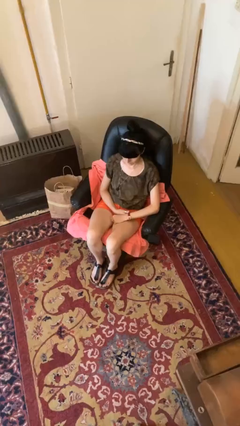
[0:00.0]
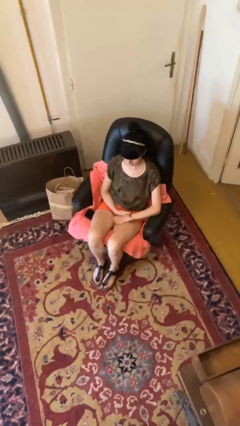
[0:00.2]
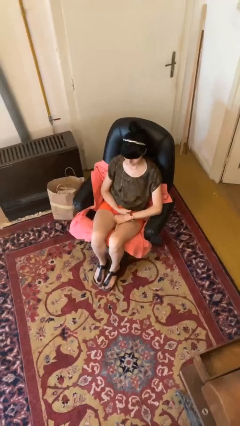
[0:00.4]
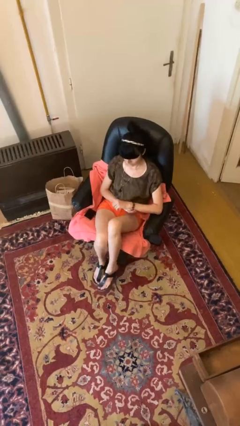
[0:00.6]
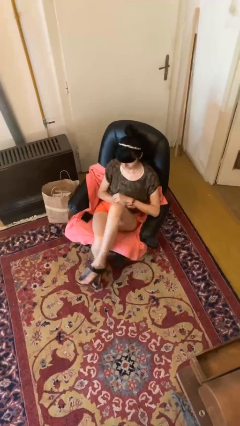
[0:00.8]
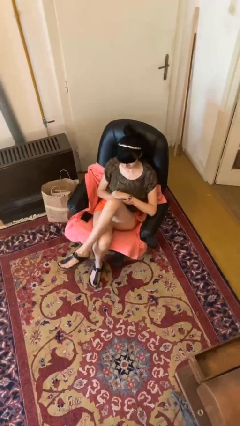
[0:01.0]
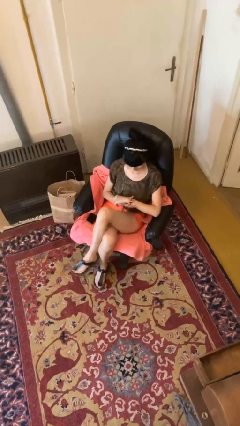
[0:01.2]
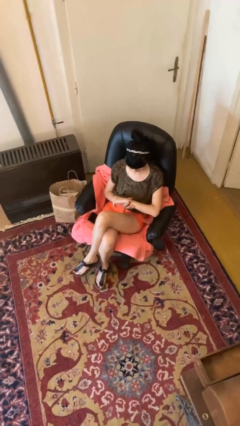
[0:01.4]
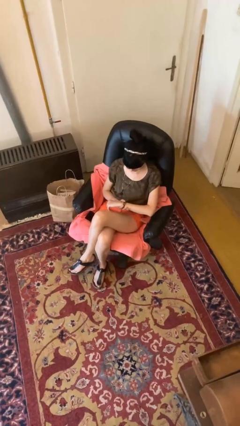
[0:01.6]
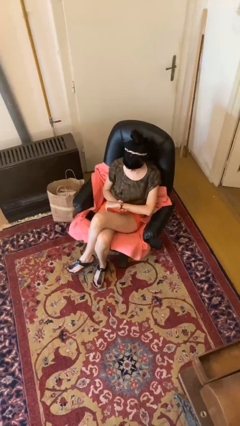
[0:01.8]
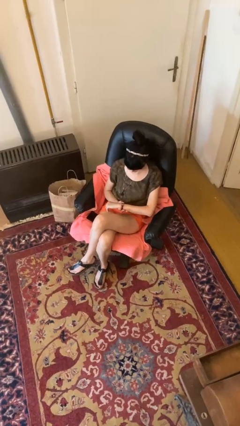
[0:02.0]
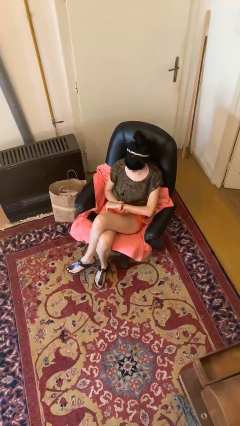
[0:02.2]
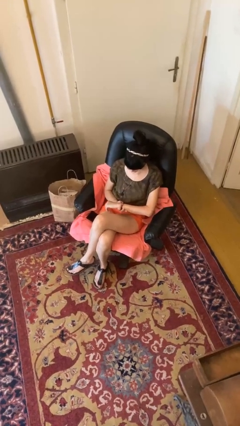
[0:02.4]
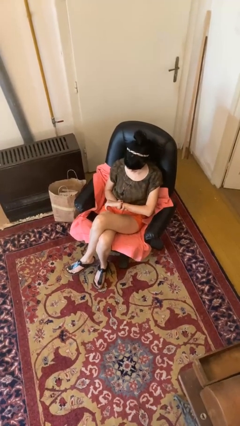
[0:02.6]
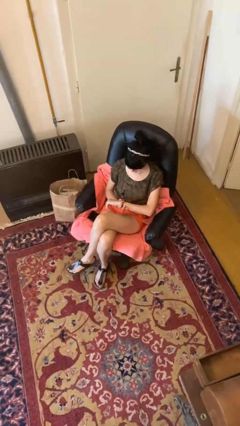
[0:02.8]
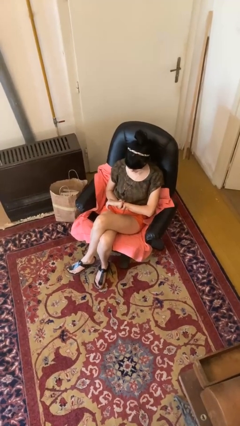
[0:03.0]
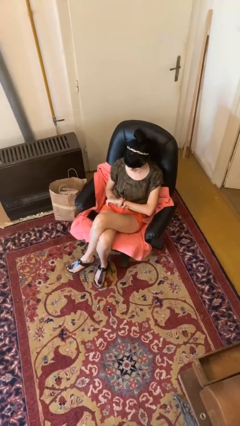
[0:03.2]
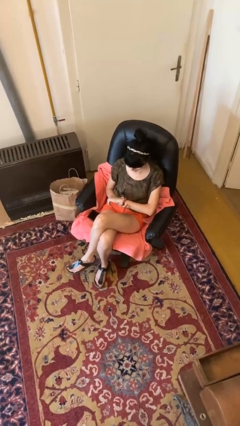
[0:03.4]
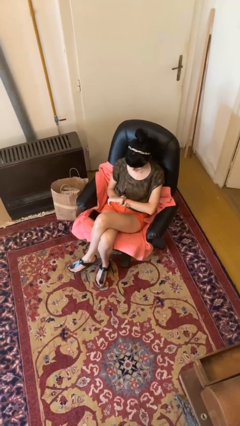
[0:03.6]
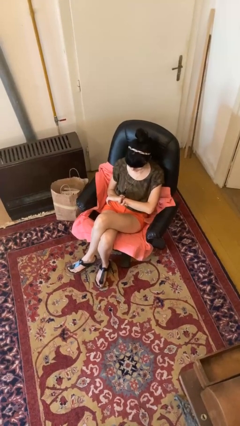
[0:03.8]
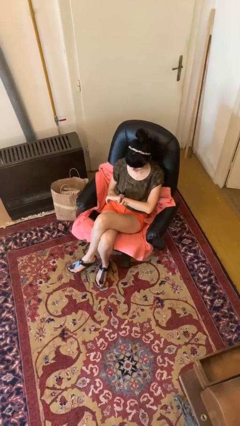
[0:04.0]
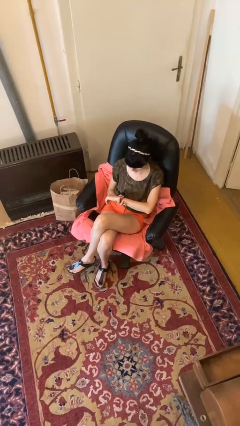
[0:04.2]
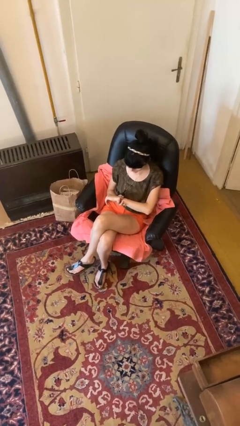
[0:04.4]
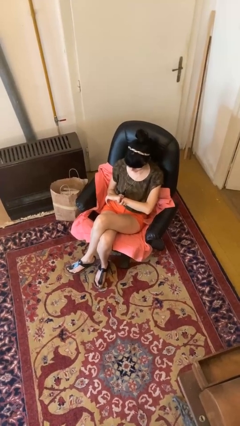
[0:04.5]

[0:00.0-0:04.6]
person looks at wristwatch

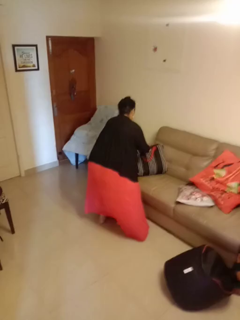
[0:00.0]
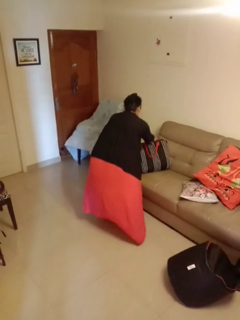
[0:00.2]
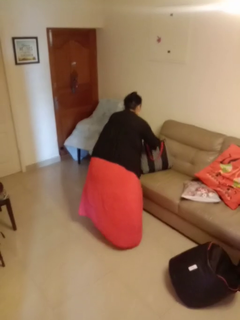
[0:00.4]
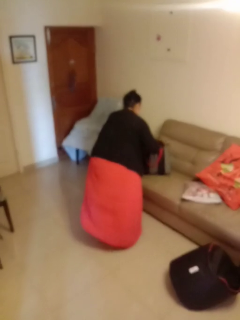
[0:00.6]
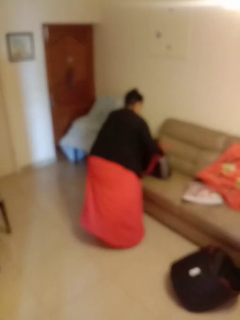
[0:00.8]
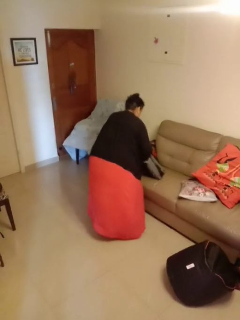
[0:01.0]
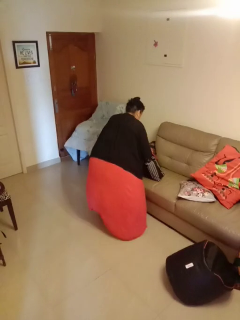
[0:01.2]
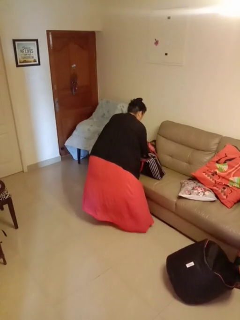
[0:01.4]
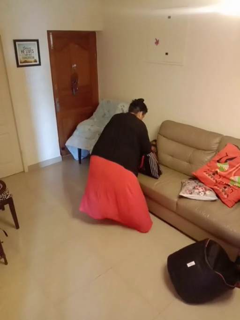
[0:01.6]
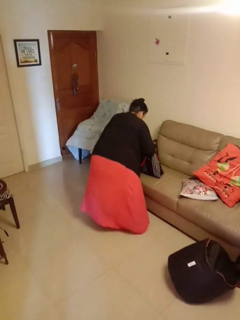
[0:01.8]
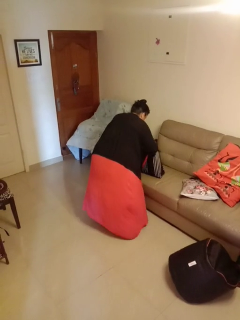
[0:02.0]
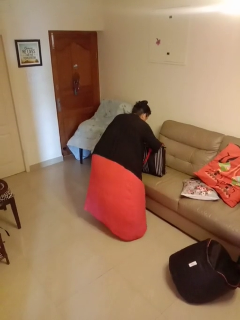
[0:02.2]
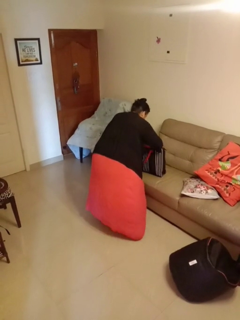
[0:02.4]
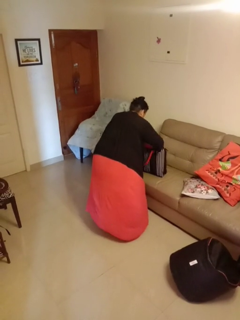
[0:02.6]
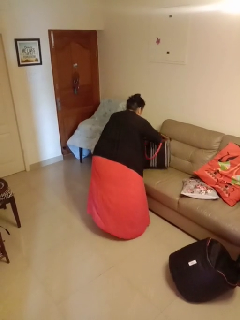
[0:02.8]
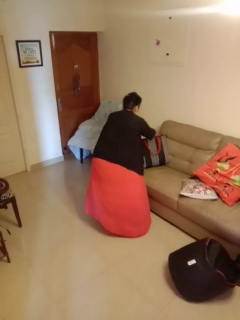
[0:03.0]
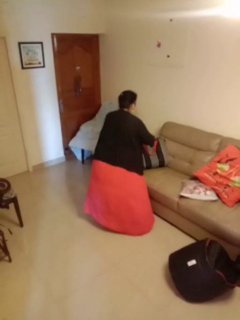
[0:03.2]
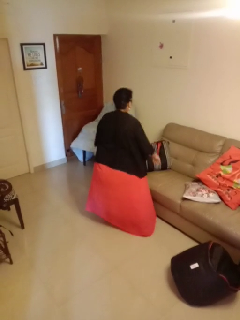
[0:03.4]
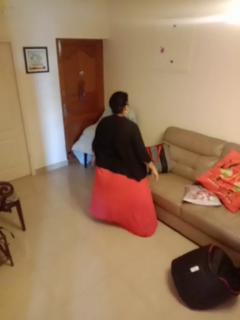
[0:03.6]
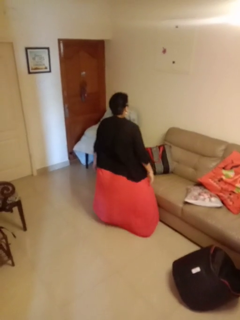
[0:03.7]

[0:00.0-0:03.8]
person searches in bag

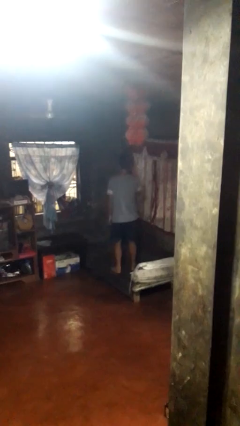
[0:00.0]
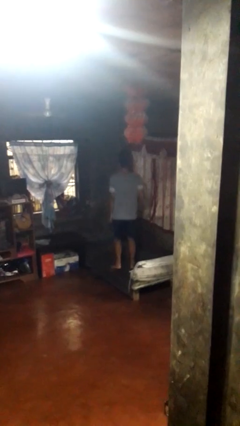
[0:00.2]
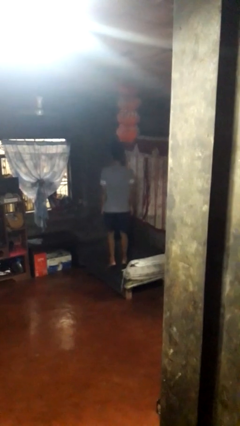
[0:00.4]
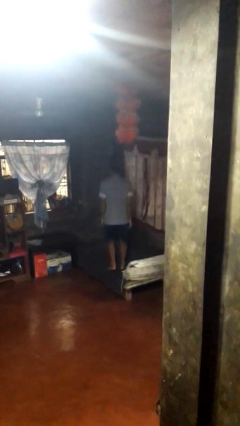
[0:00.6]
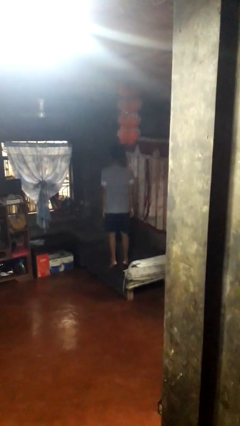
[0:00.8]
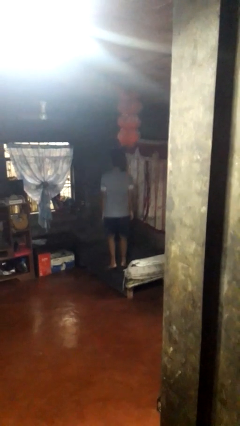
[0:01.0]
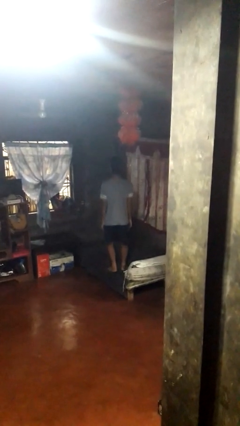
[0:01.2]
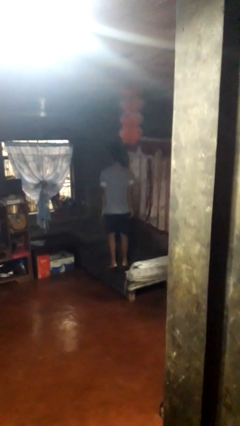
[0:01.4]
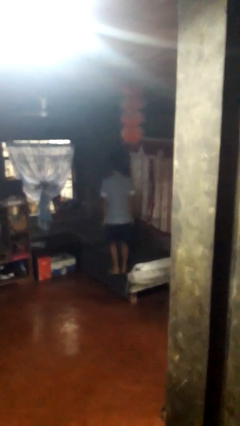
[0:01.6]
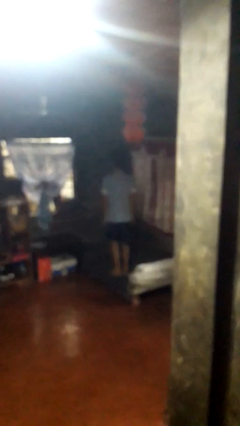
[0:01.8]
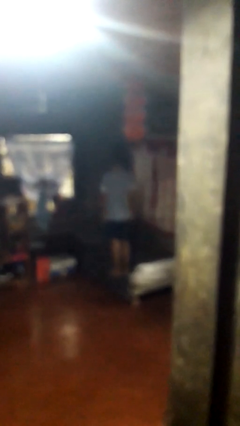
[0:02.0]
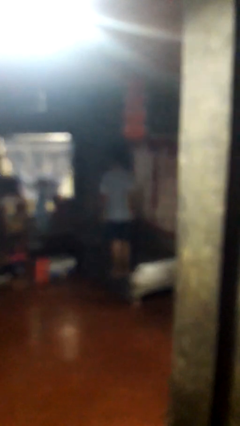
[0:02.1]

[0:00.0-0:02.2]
person jumps on bed

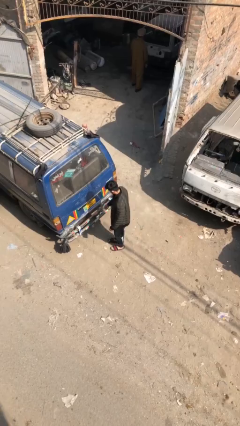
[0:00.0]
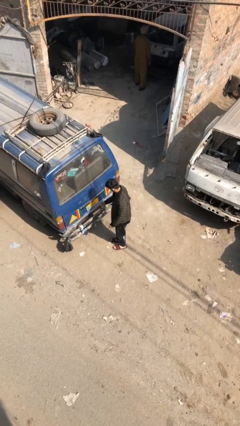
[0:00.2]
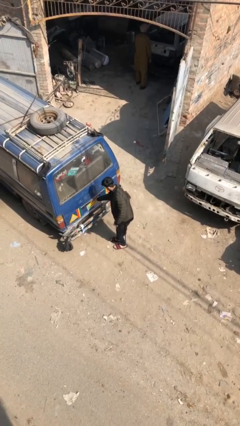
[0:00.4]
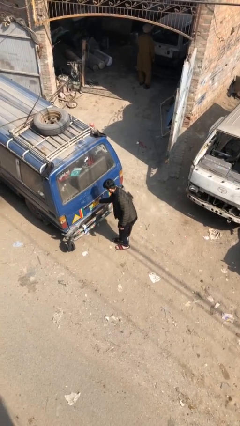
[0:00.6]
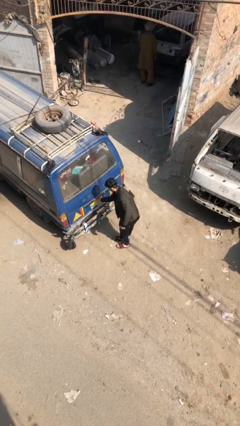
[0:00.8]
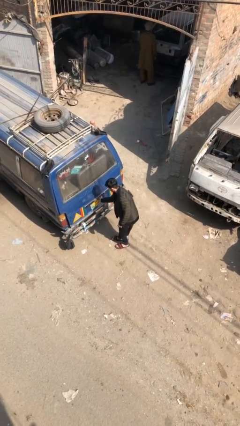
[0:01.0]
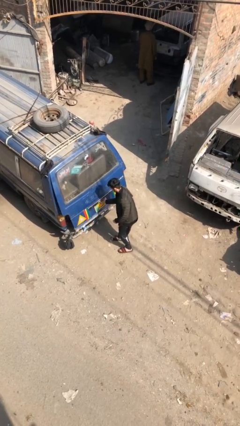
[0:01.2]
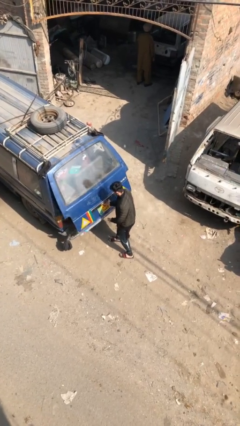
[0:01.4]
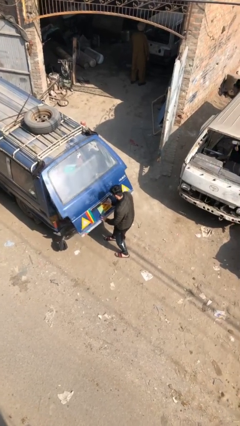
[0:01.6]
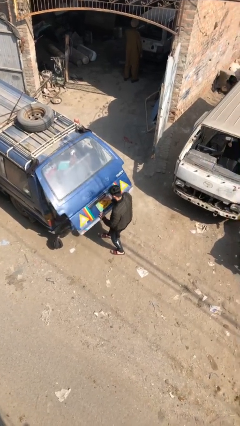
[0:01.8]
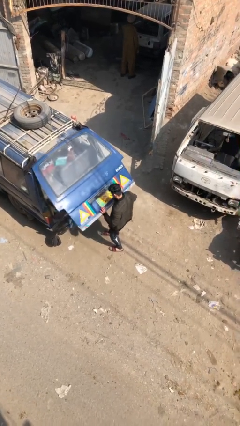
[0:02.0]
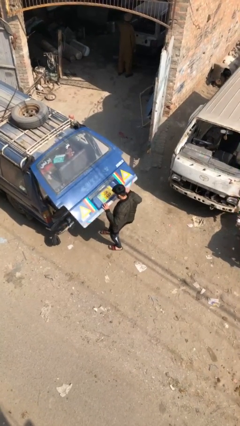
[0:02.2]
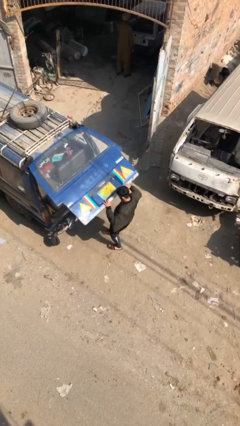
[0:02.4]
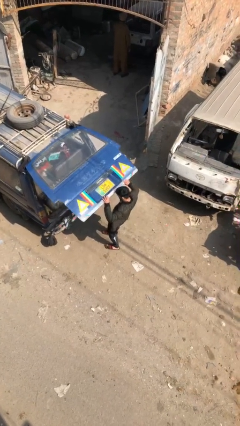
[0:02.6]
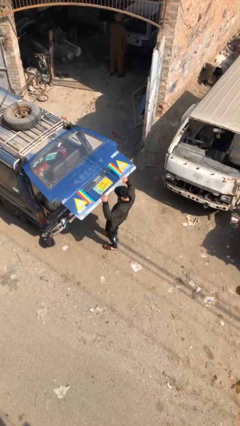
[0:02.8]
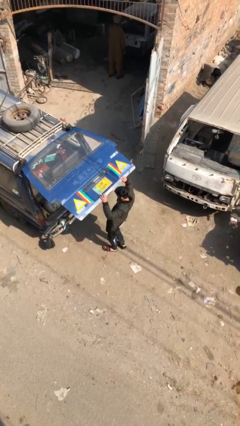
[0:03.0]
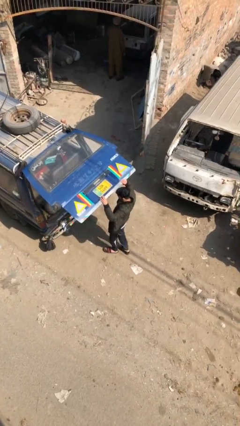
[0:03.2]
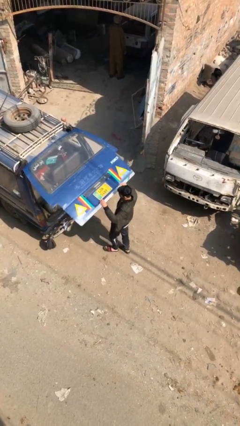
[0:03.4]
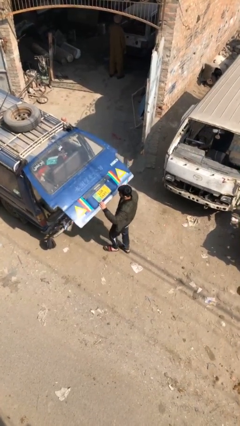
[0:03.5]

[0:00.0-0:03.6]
person opens car trunk

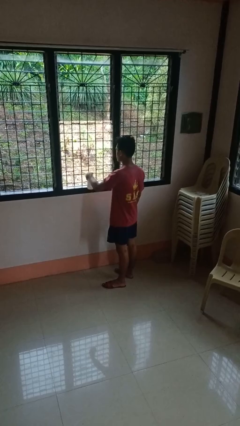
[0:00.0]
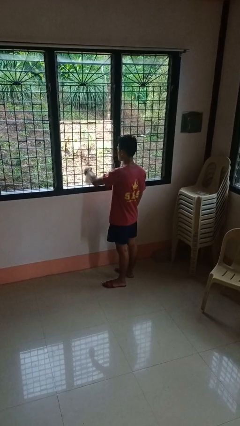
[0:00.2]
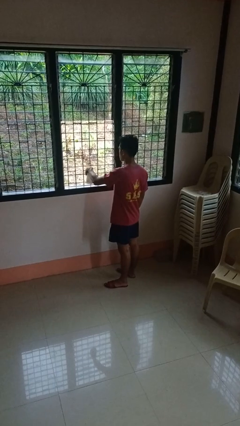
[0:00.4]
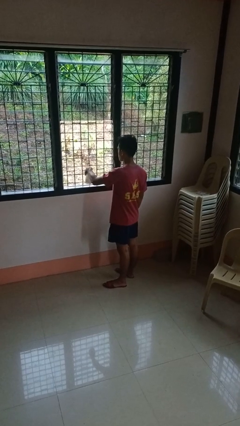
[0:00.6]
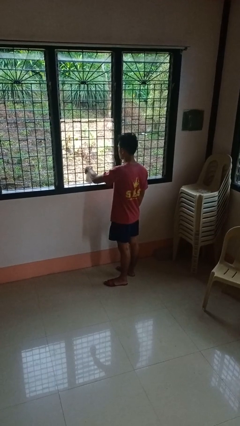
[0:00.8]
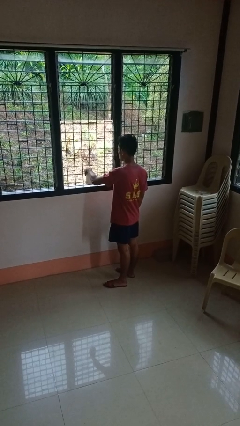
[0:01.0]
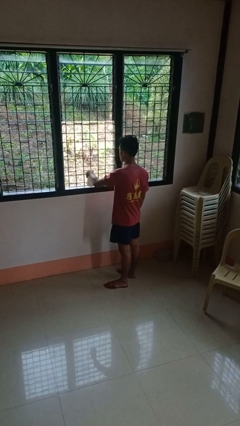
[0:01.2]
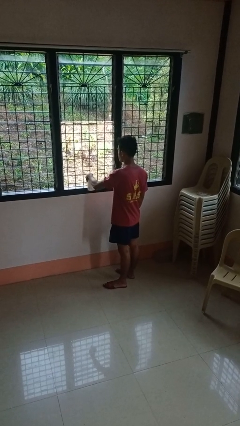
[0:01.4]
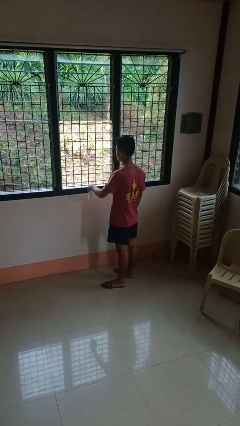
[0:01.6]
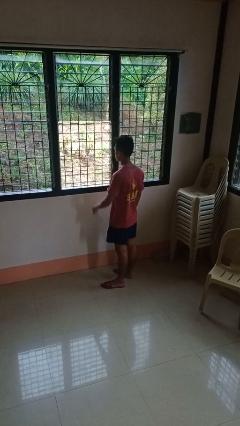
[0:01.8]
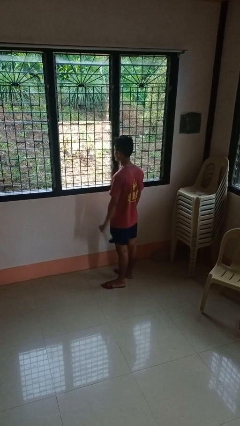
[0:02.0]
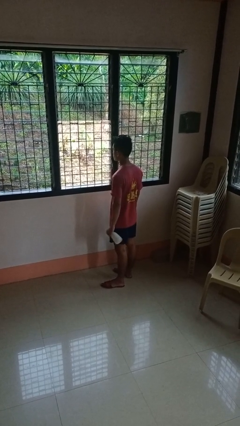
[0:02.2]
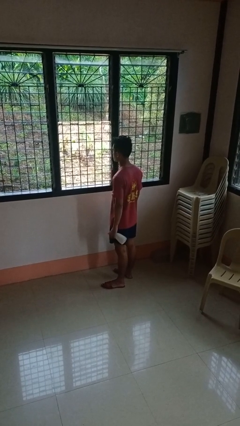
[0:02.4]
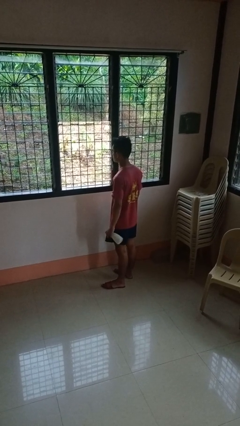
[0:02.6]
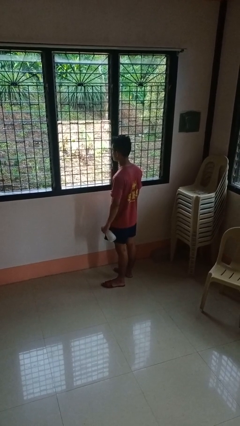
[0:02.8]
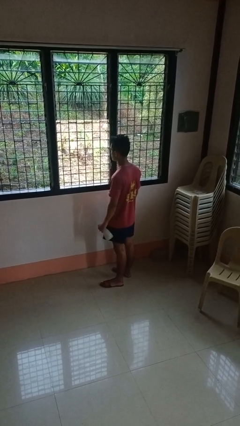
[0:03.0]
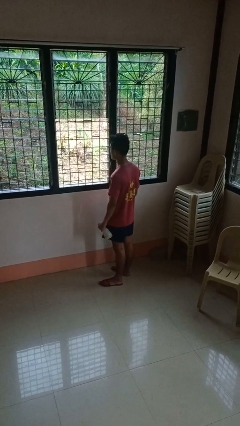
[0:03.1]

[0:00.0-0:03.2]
person sprays from bottle

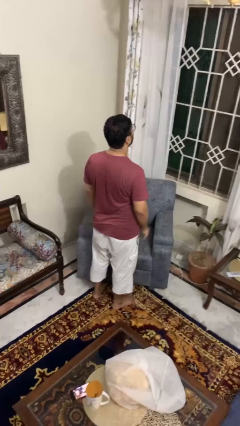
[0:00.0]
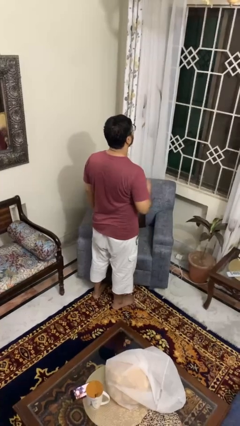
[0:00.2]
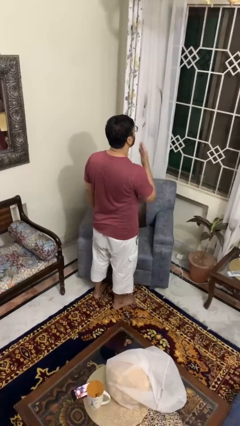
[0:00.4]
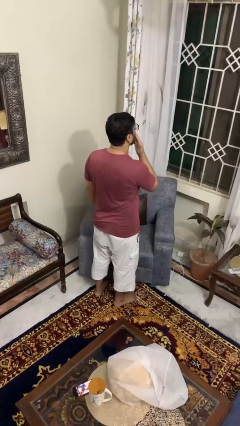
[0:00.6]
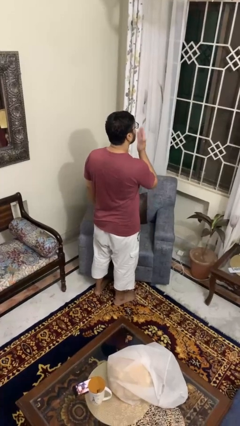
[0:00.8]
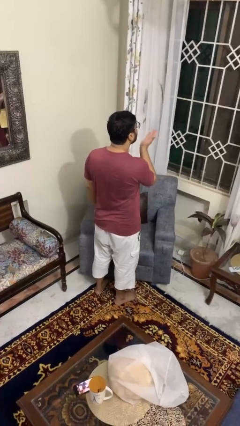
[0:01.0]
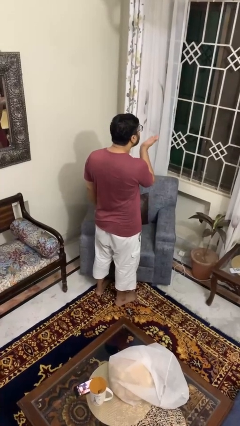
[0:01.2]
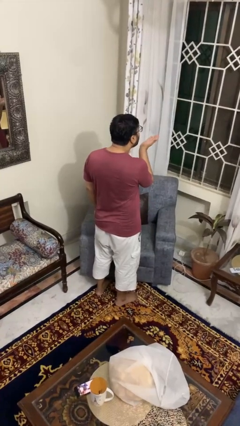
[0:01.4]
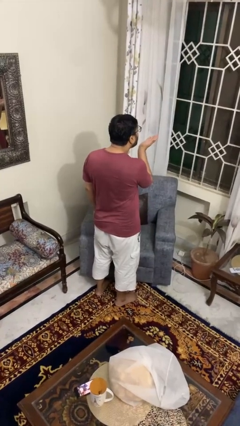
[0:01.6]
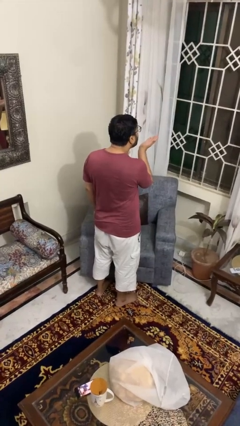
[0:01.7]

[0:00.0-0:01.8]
person gestures blow kiss
